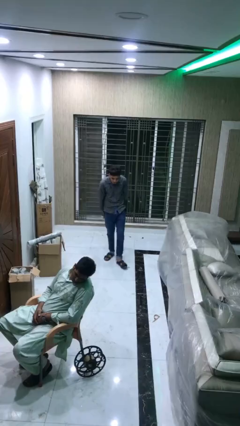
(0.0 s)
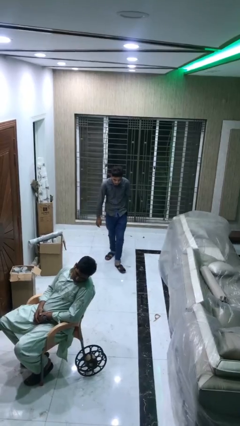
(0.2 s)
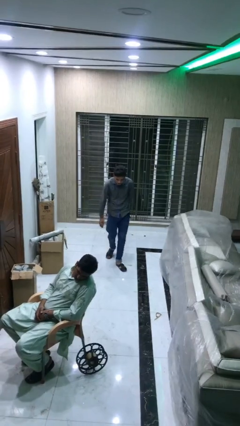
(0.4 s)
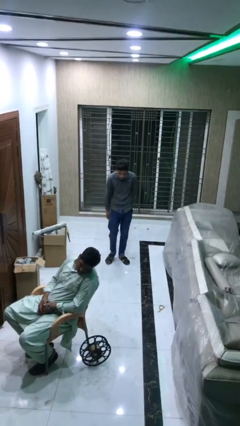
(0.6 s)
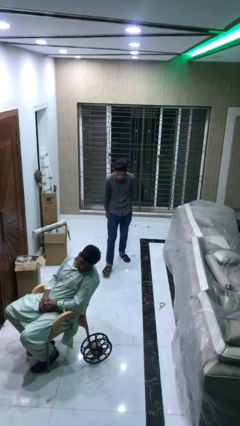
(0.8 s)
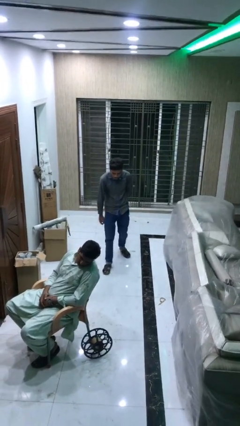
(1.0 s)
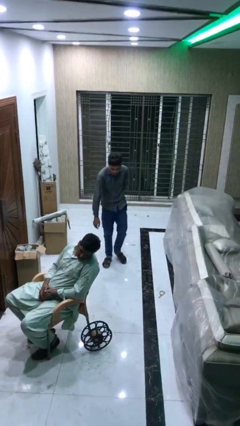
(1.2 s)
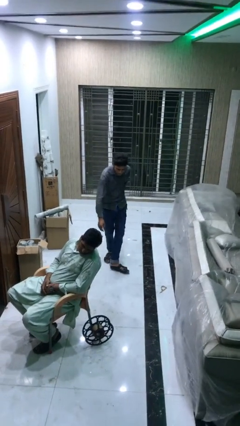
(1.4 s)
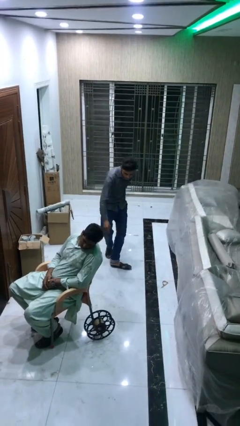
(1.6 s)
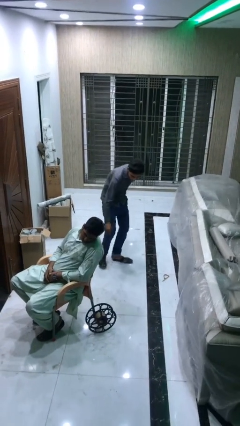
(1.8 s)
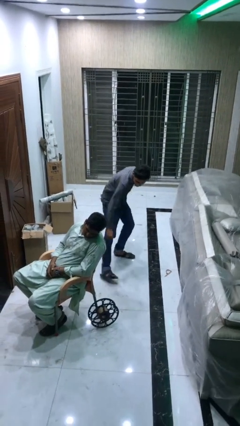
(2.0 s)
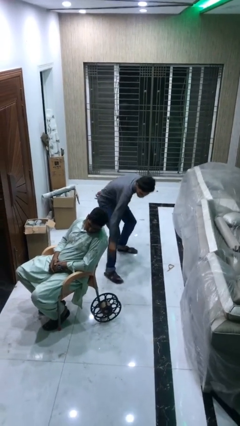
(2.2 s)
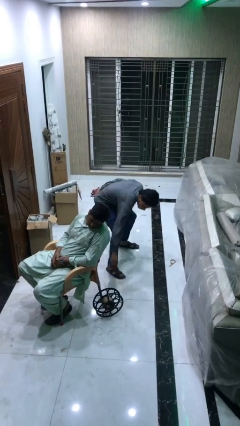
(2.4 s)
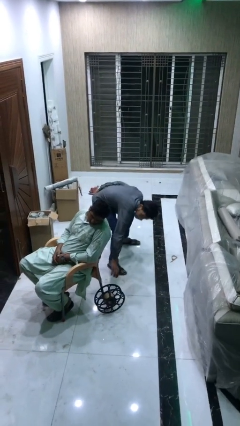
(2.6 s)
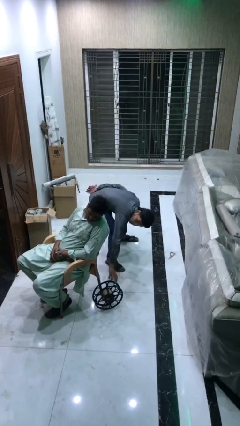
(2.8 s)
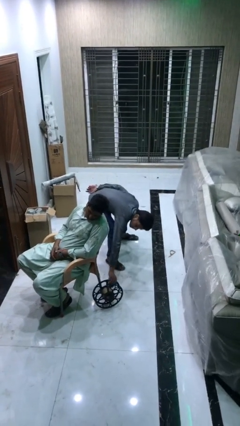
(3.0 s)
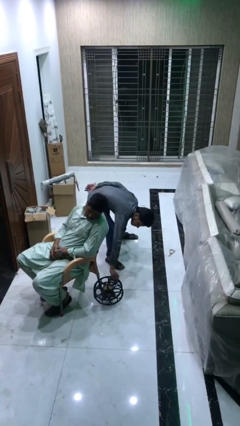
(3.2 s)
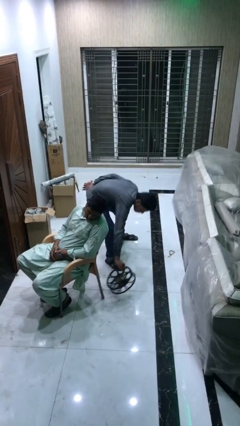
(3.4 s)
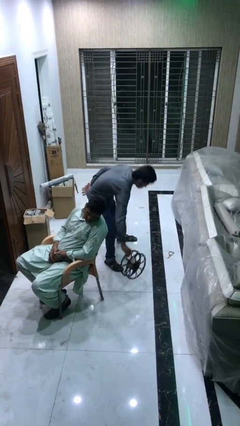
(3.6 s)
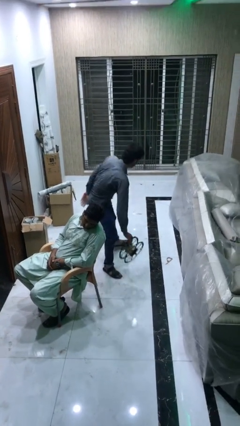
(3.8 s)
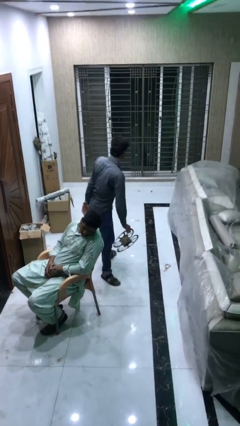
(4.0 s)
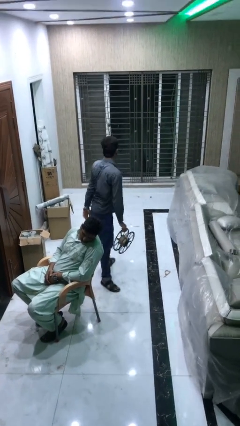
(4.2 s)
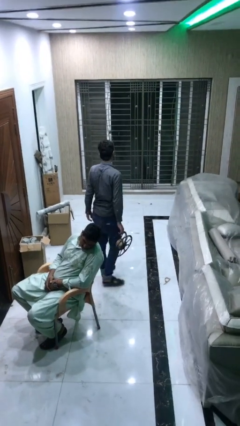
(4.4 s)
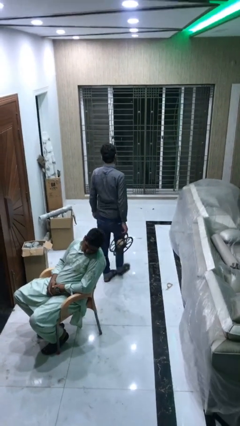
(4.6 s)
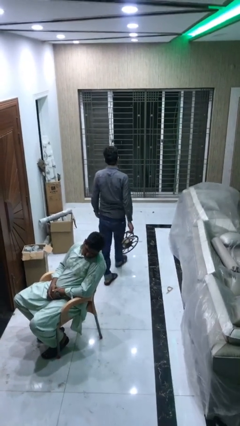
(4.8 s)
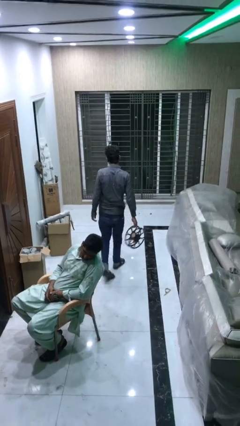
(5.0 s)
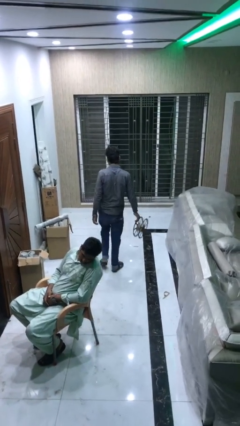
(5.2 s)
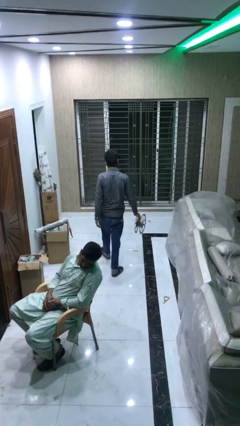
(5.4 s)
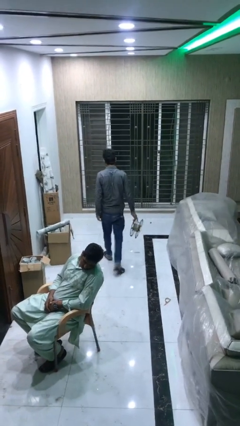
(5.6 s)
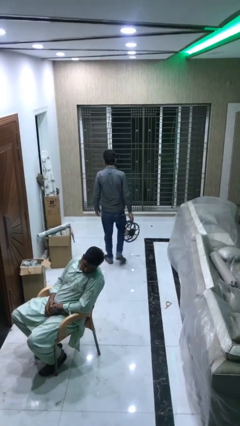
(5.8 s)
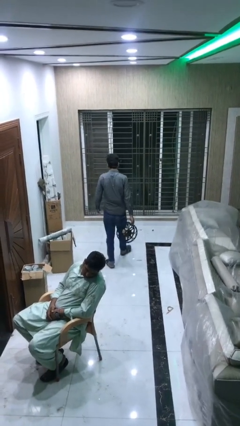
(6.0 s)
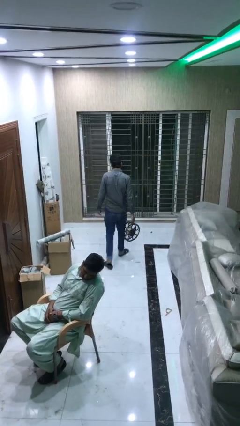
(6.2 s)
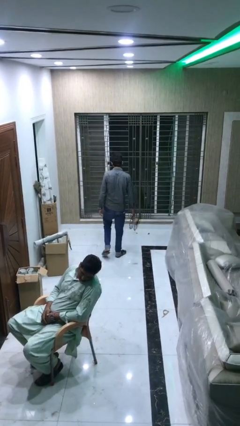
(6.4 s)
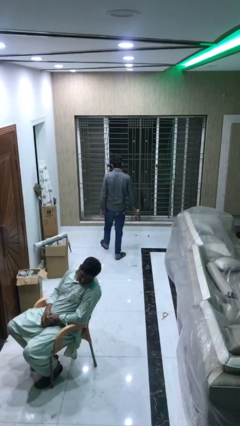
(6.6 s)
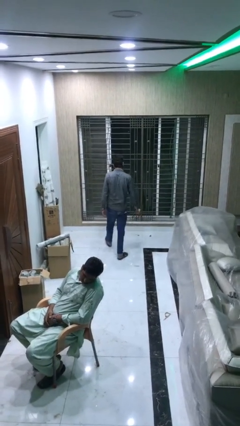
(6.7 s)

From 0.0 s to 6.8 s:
person steals object from person

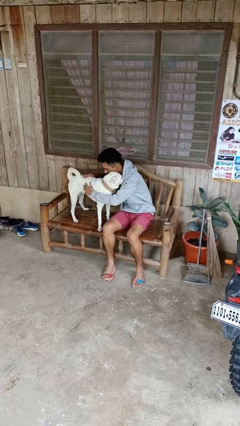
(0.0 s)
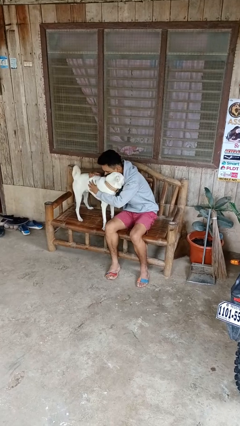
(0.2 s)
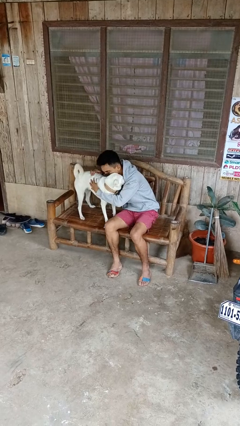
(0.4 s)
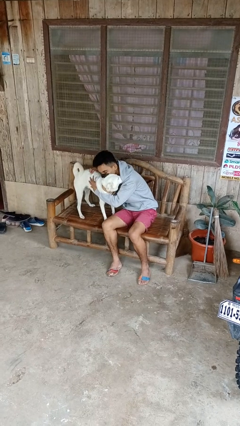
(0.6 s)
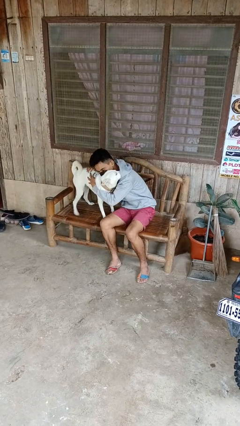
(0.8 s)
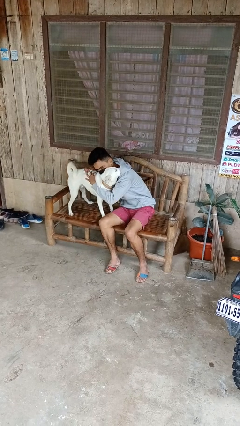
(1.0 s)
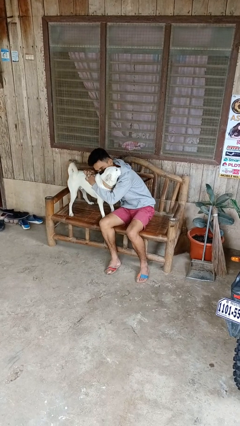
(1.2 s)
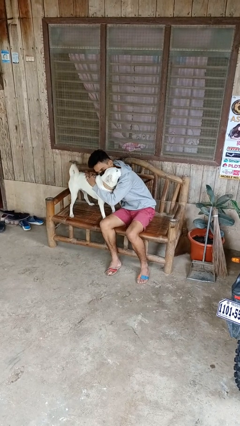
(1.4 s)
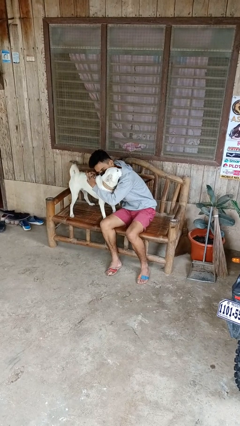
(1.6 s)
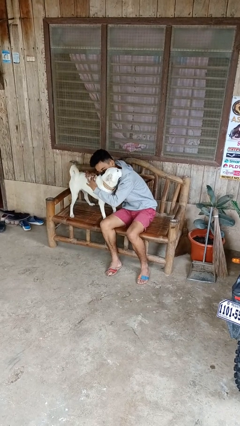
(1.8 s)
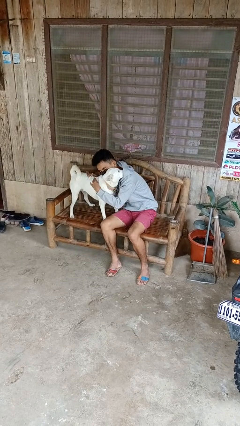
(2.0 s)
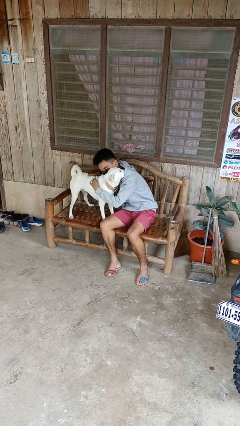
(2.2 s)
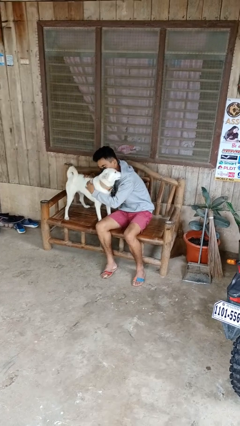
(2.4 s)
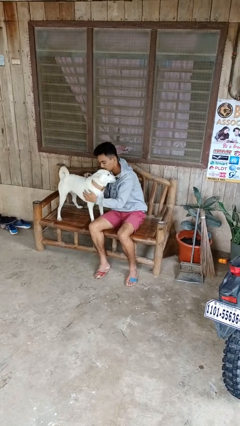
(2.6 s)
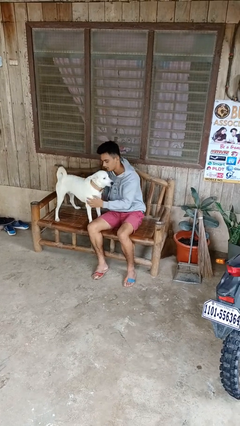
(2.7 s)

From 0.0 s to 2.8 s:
person hugs dog

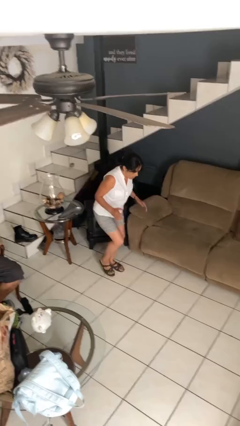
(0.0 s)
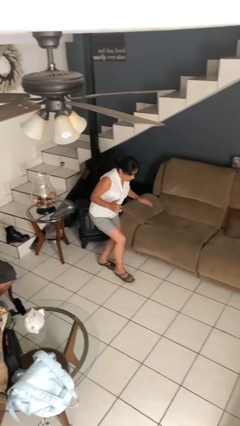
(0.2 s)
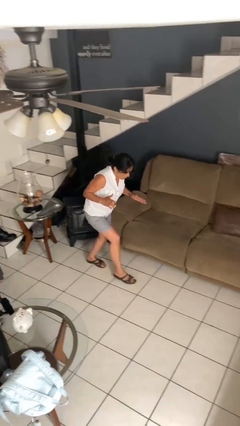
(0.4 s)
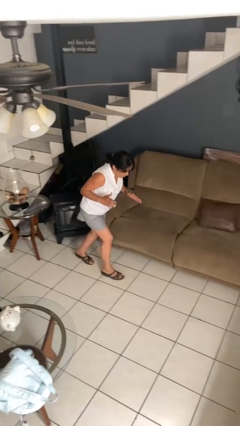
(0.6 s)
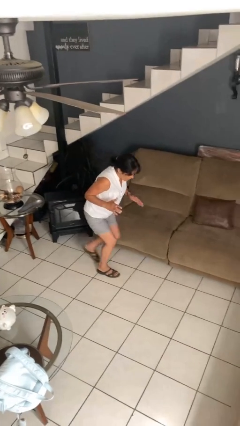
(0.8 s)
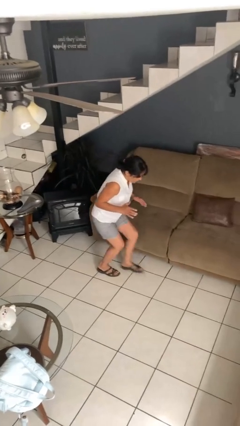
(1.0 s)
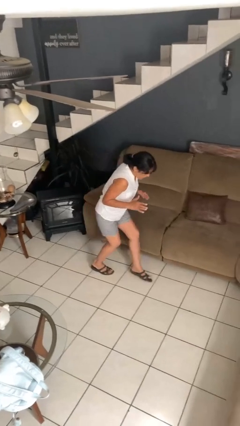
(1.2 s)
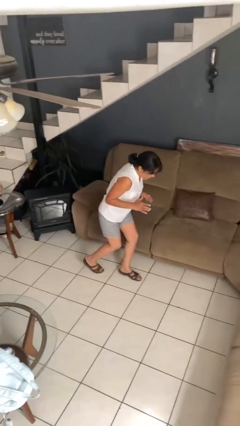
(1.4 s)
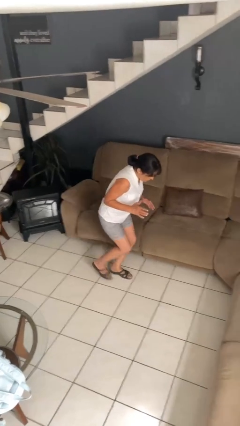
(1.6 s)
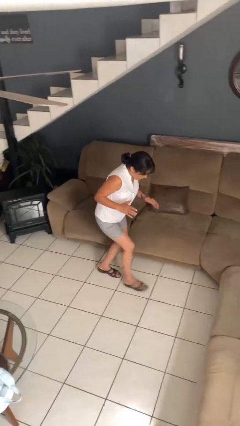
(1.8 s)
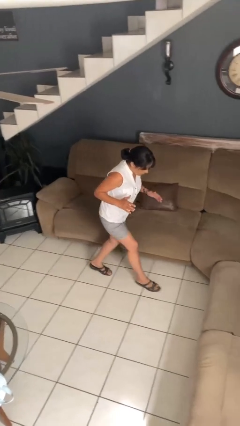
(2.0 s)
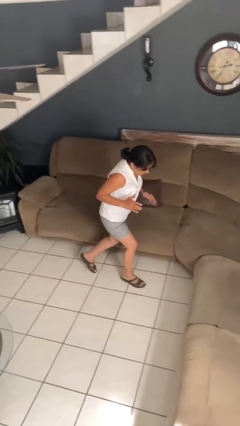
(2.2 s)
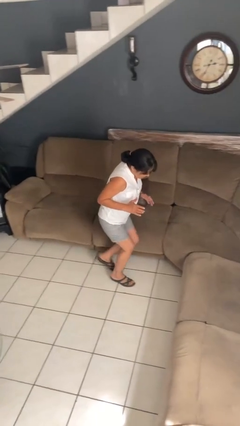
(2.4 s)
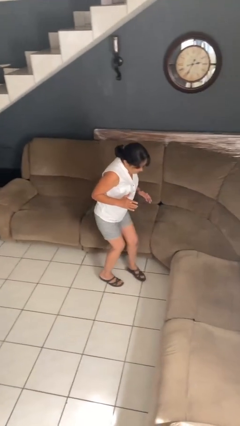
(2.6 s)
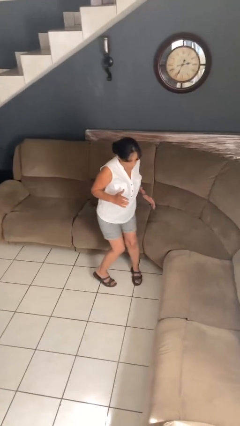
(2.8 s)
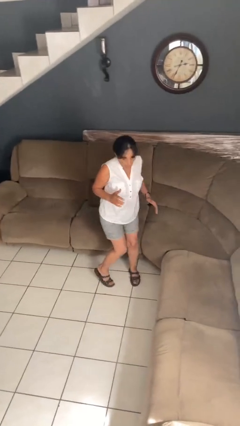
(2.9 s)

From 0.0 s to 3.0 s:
person walks tiptoe

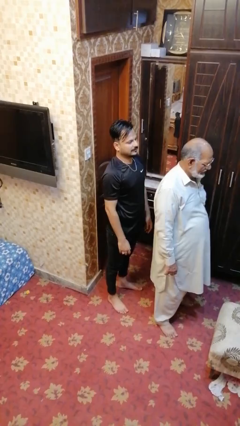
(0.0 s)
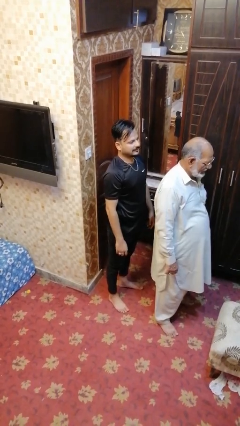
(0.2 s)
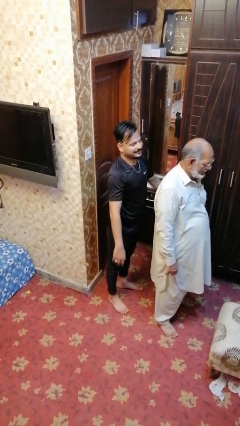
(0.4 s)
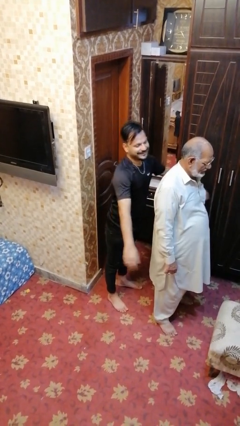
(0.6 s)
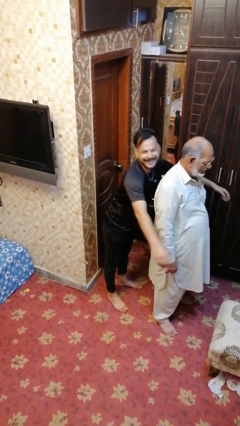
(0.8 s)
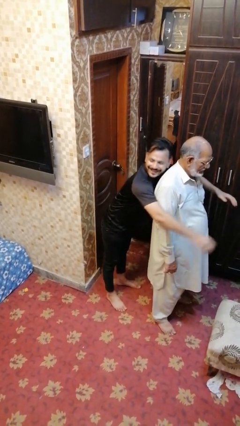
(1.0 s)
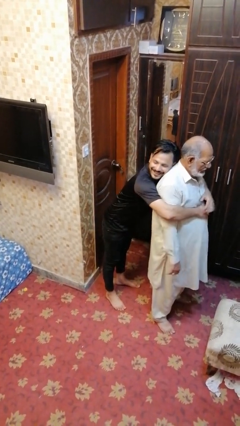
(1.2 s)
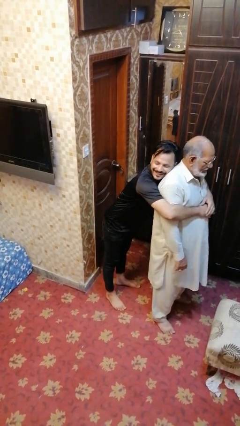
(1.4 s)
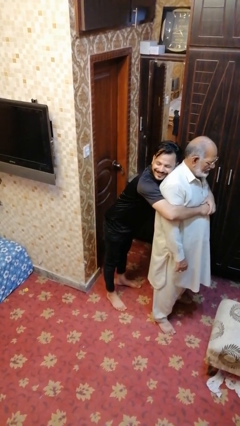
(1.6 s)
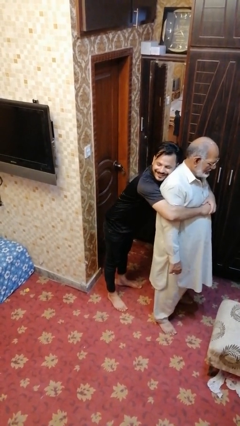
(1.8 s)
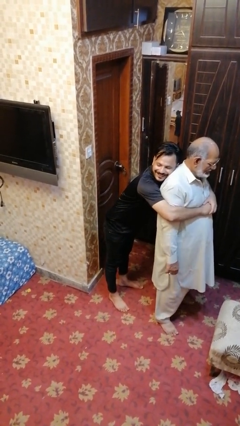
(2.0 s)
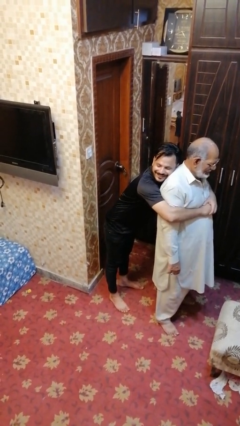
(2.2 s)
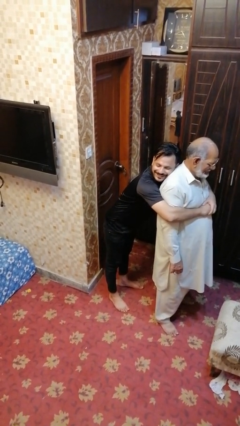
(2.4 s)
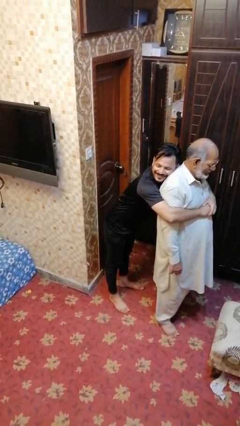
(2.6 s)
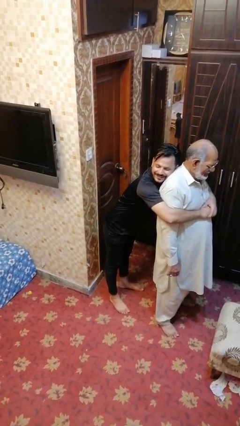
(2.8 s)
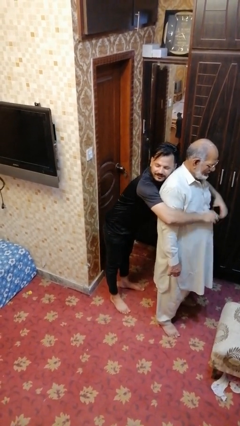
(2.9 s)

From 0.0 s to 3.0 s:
person hugs person from behind

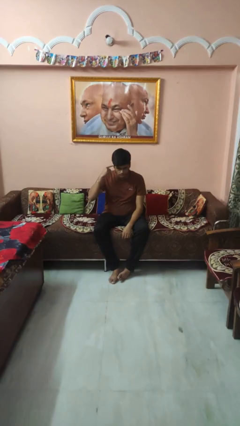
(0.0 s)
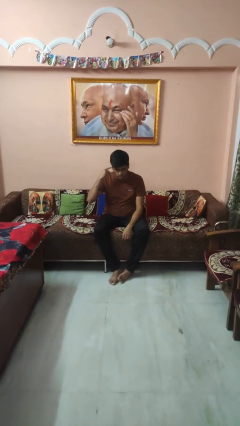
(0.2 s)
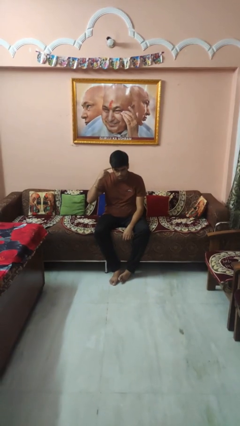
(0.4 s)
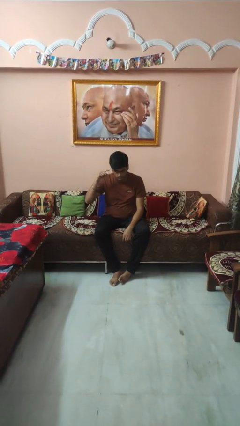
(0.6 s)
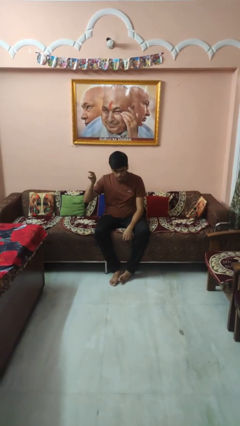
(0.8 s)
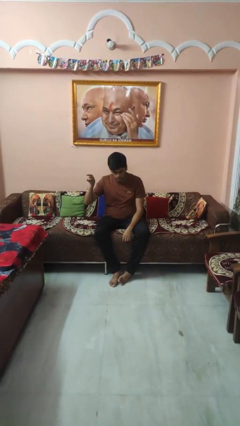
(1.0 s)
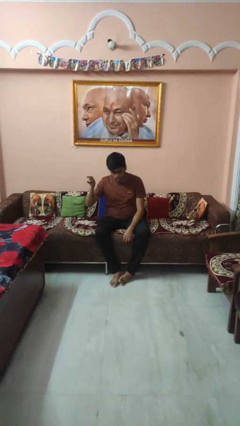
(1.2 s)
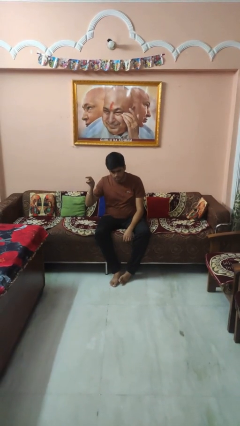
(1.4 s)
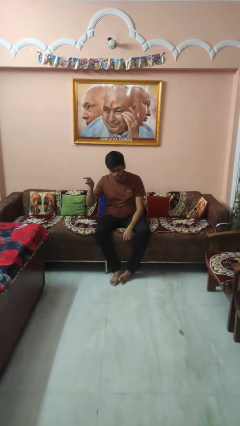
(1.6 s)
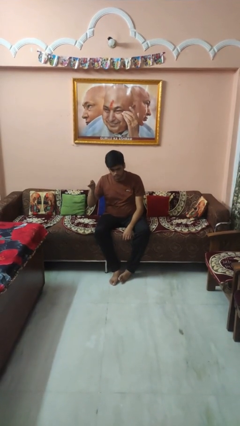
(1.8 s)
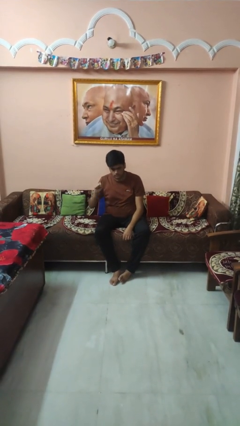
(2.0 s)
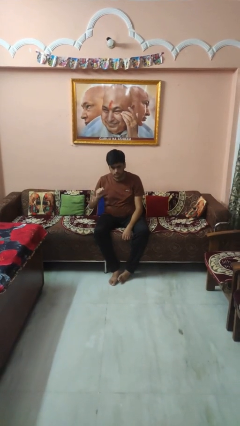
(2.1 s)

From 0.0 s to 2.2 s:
person gestures listen closely
